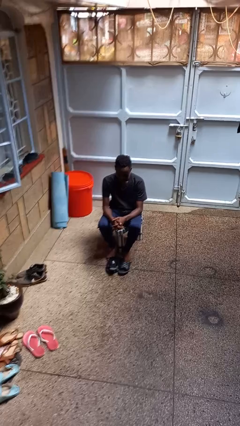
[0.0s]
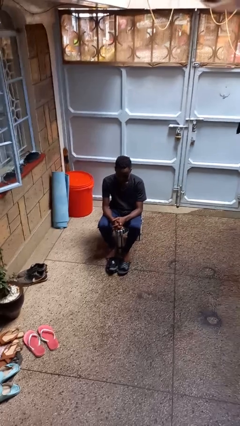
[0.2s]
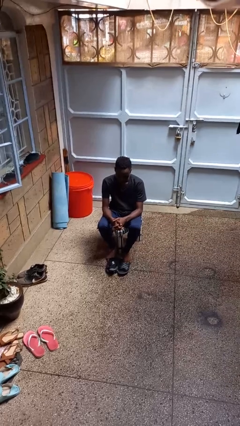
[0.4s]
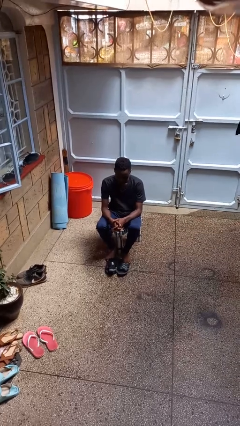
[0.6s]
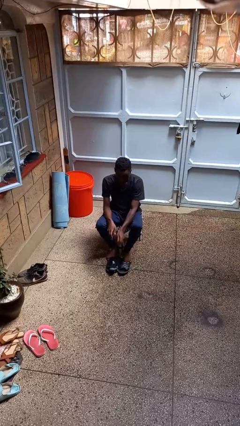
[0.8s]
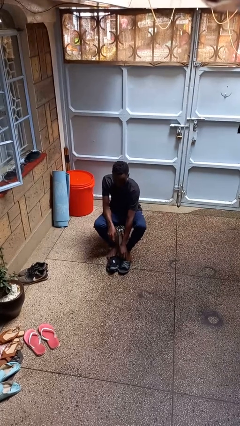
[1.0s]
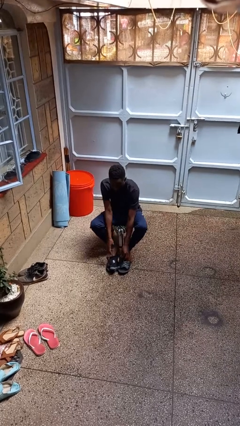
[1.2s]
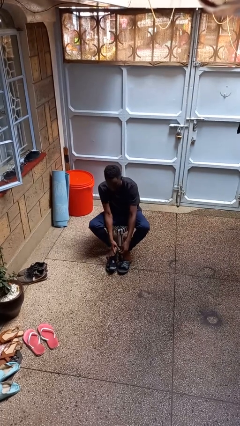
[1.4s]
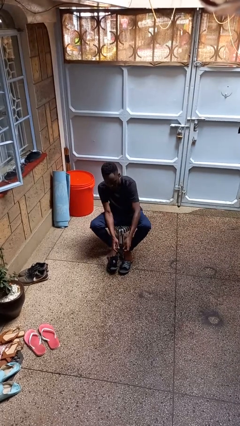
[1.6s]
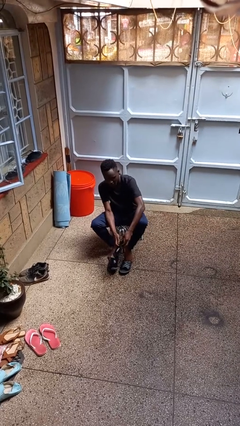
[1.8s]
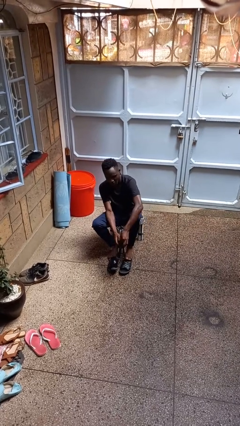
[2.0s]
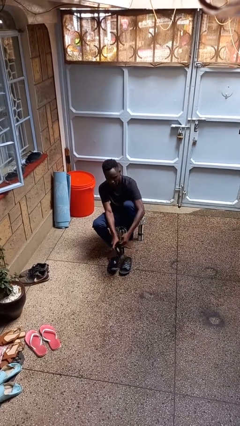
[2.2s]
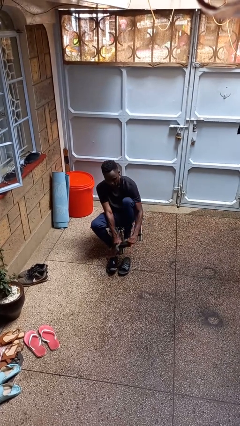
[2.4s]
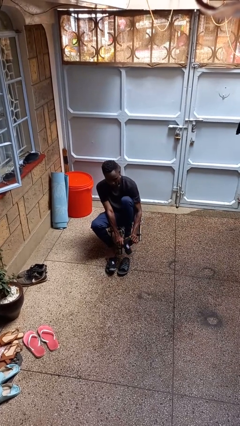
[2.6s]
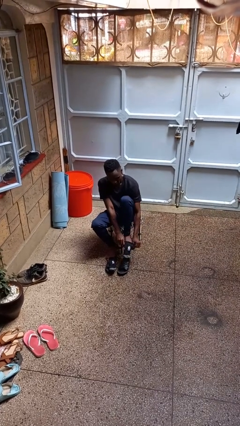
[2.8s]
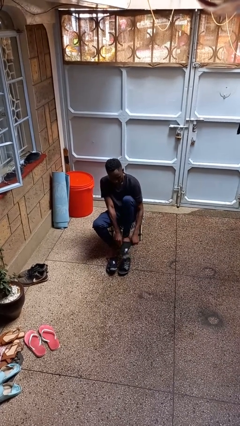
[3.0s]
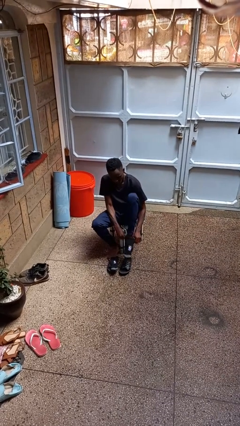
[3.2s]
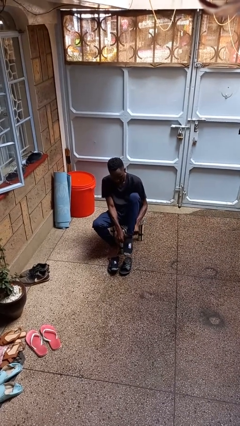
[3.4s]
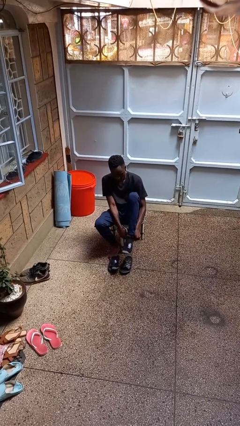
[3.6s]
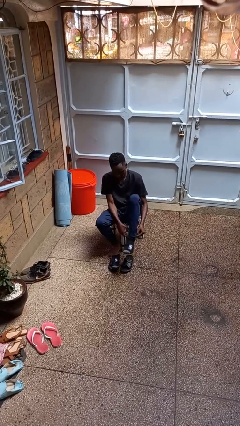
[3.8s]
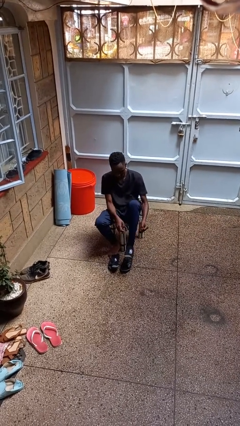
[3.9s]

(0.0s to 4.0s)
person puts on socks

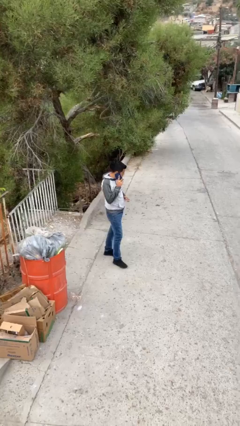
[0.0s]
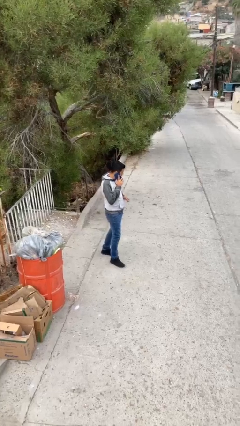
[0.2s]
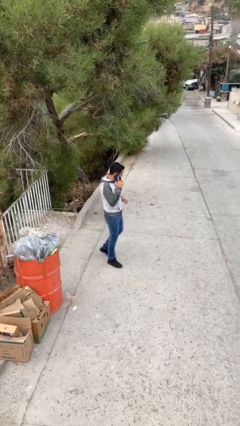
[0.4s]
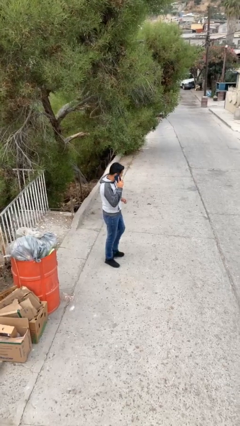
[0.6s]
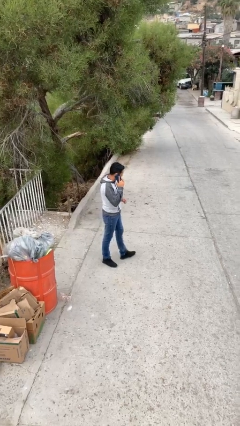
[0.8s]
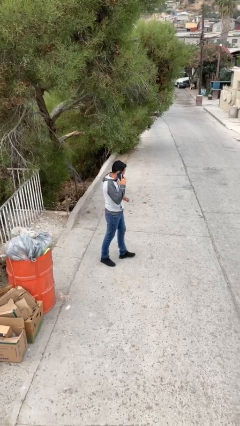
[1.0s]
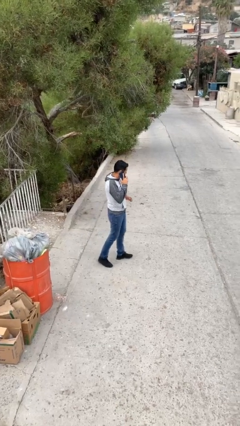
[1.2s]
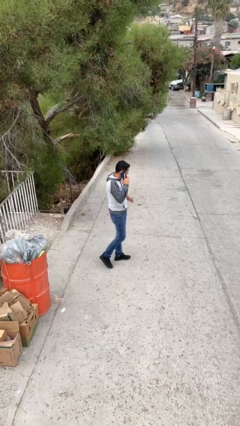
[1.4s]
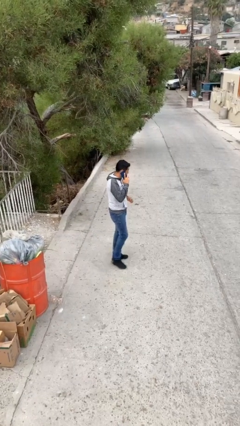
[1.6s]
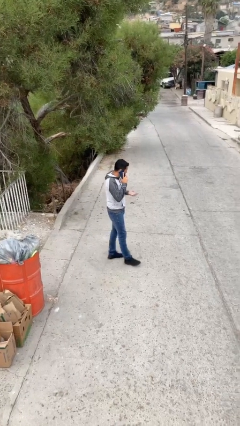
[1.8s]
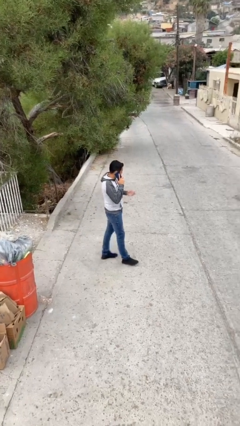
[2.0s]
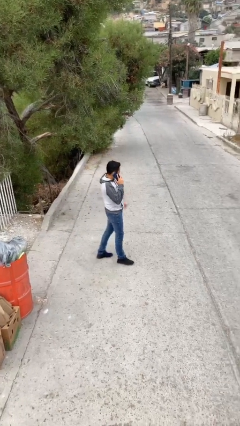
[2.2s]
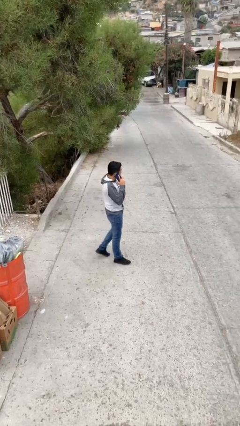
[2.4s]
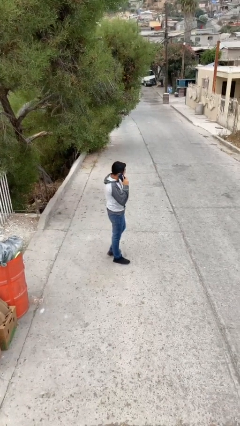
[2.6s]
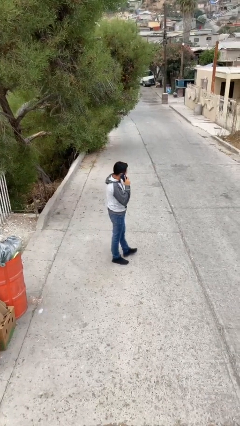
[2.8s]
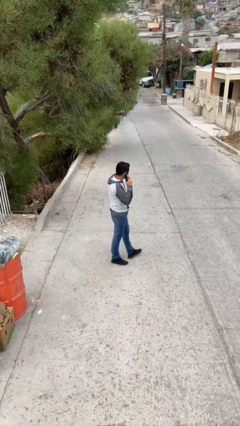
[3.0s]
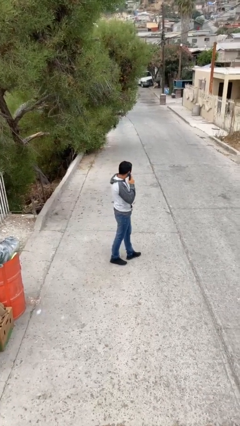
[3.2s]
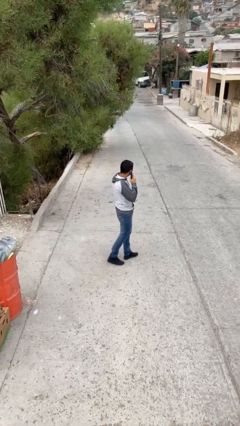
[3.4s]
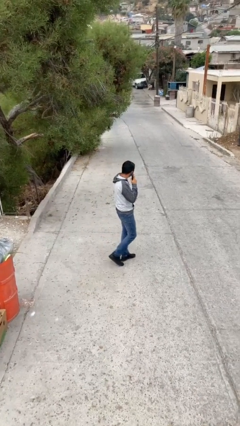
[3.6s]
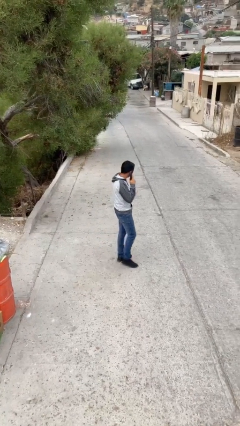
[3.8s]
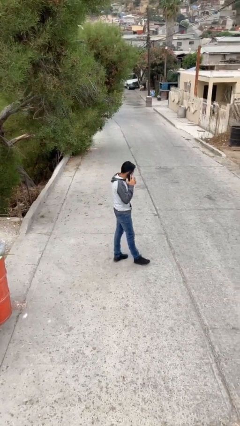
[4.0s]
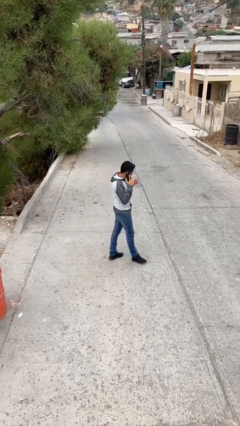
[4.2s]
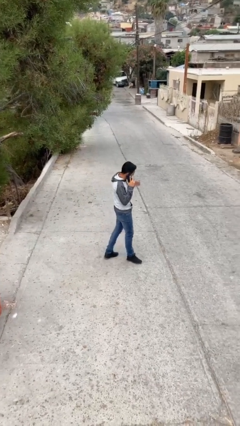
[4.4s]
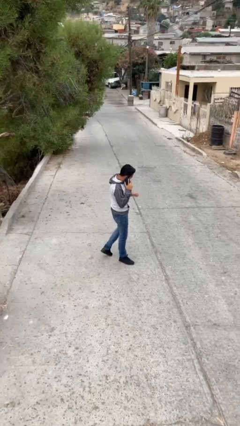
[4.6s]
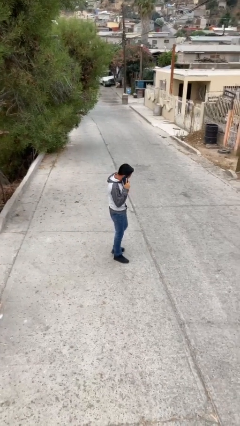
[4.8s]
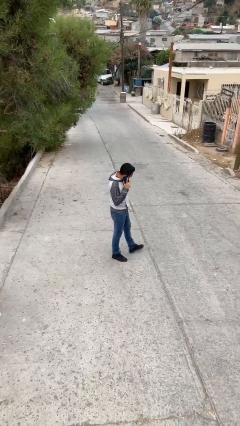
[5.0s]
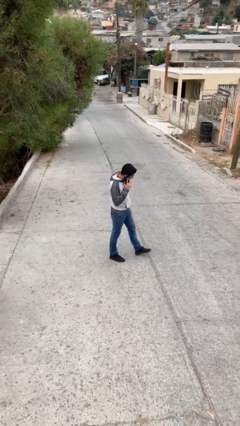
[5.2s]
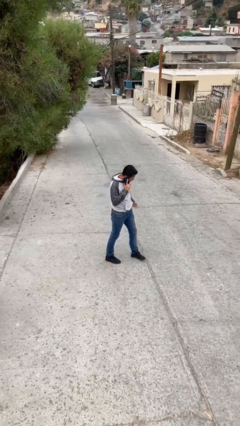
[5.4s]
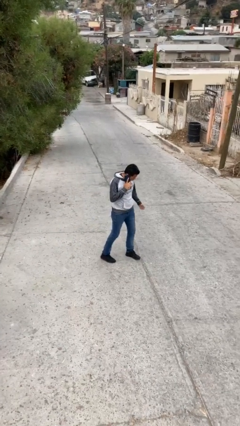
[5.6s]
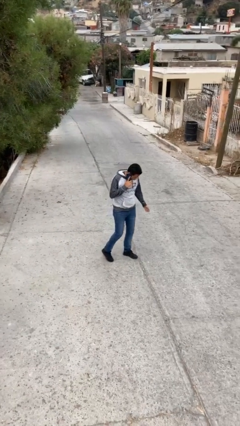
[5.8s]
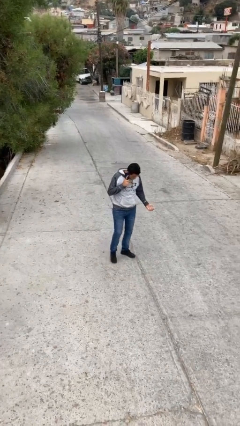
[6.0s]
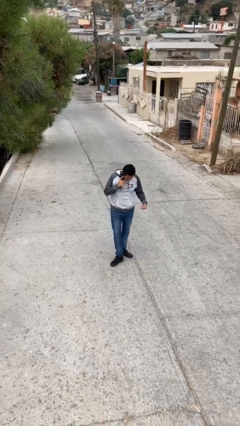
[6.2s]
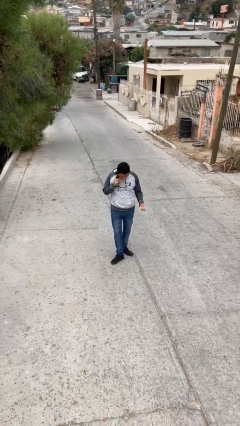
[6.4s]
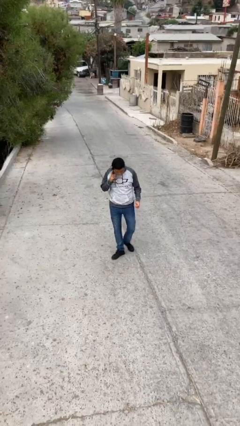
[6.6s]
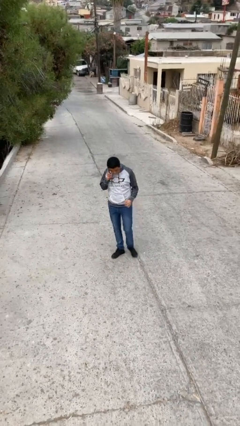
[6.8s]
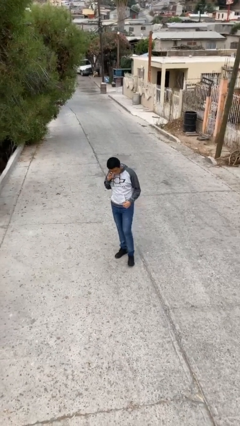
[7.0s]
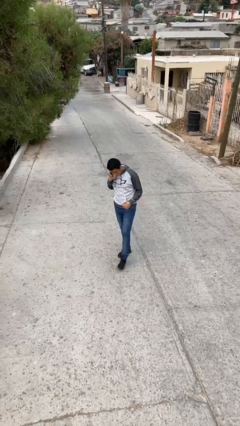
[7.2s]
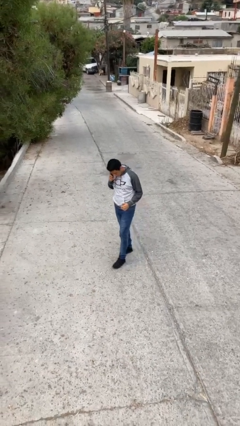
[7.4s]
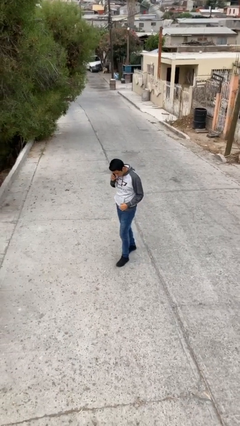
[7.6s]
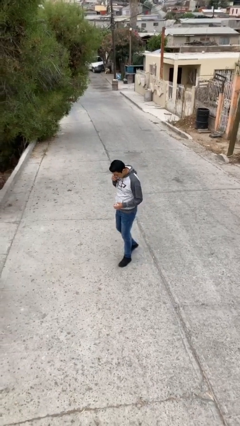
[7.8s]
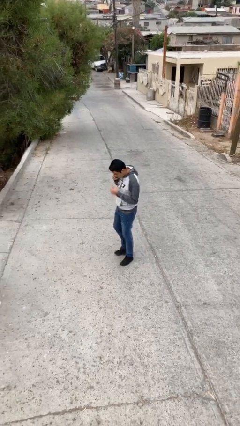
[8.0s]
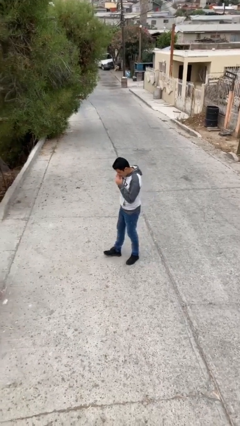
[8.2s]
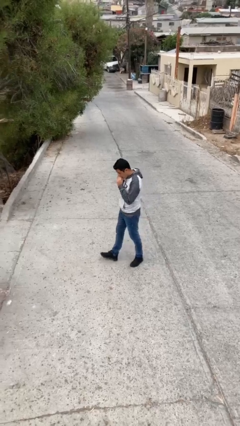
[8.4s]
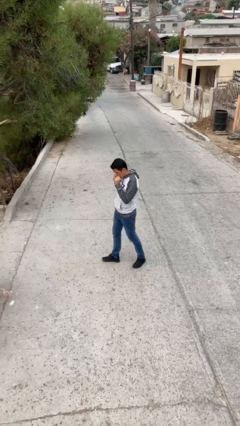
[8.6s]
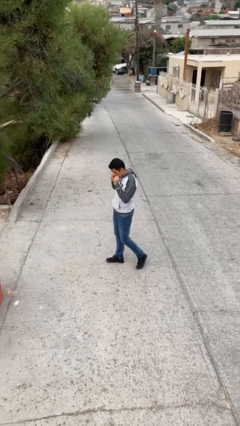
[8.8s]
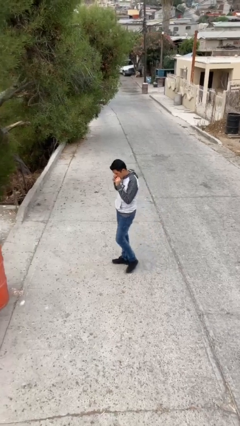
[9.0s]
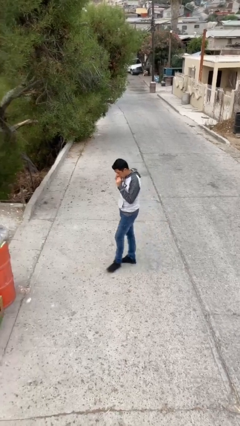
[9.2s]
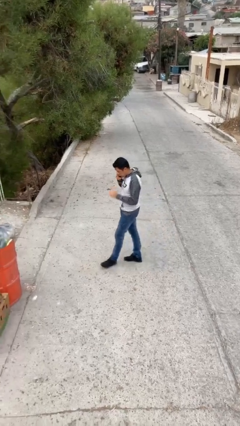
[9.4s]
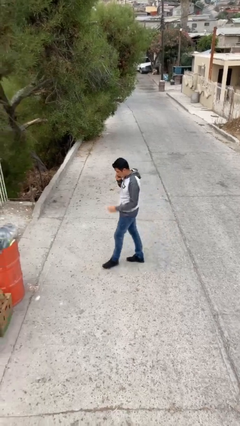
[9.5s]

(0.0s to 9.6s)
person talks on phone

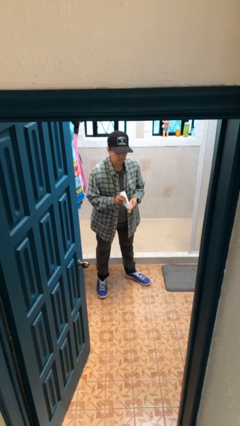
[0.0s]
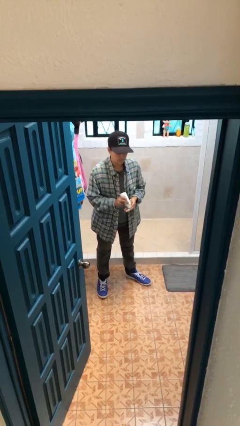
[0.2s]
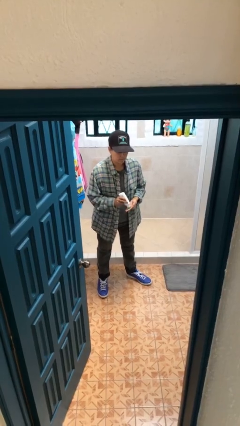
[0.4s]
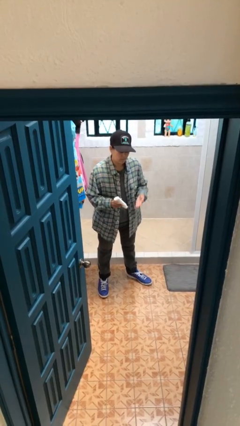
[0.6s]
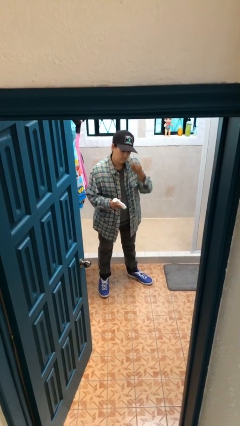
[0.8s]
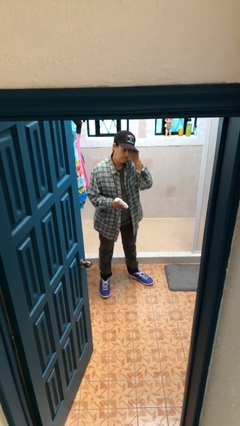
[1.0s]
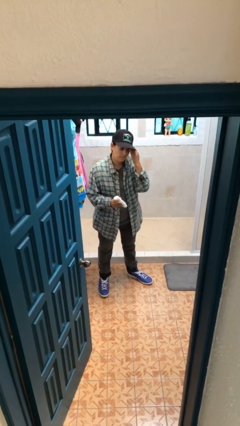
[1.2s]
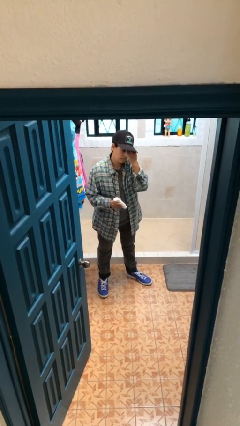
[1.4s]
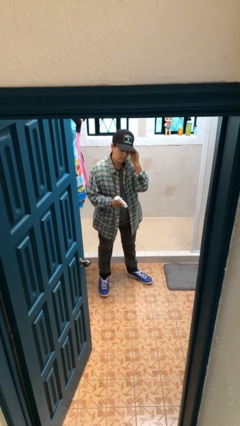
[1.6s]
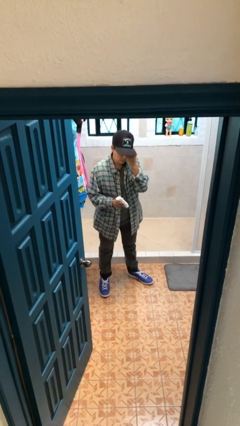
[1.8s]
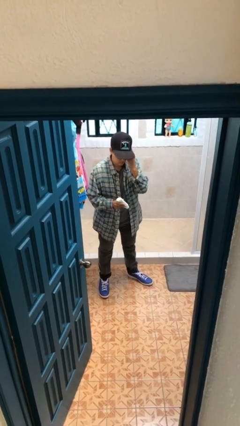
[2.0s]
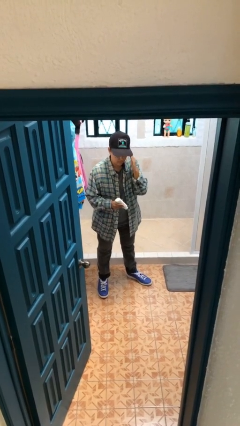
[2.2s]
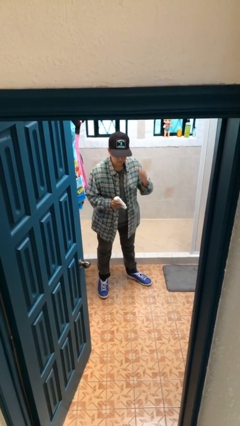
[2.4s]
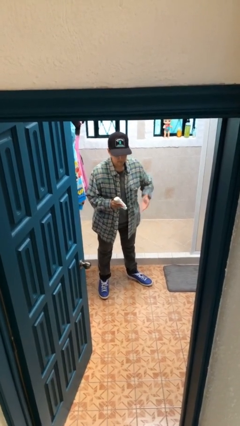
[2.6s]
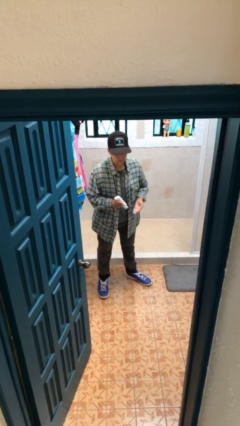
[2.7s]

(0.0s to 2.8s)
person applies facial moisturizer

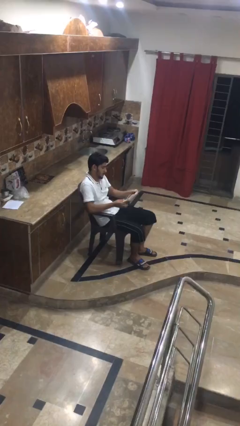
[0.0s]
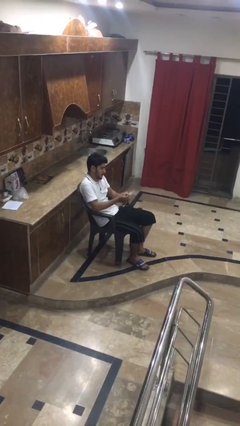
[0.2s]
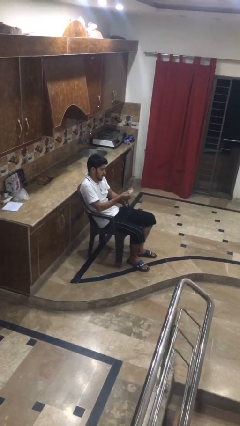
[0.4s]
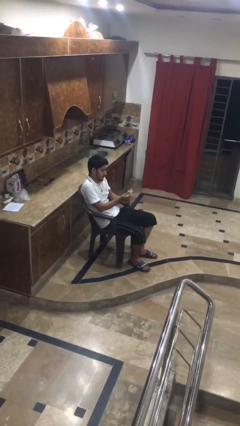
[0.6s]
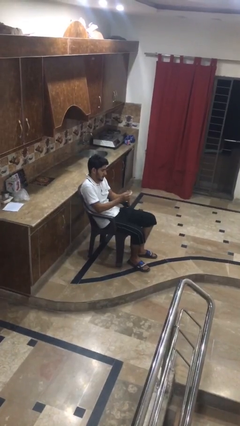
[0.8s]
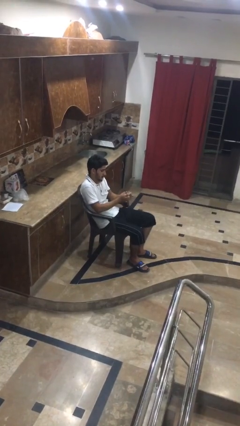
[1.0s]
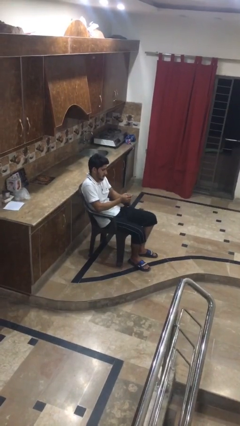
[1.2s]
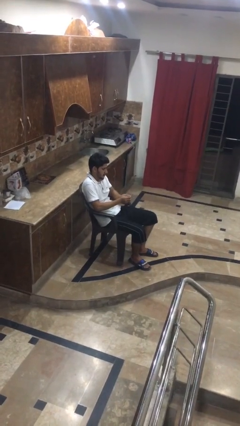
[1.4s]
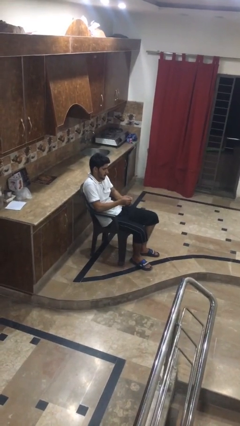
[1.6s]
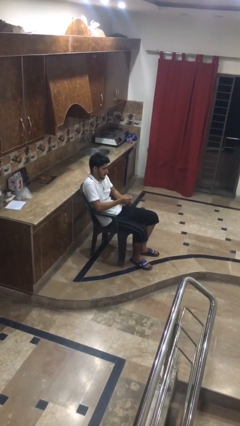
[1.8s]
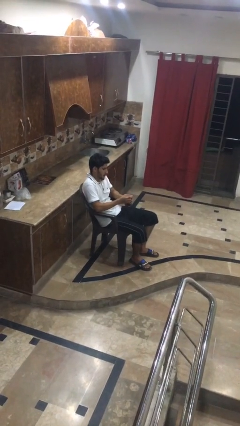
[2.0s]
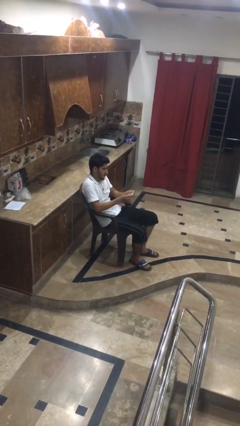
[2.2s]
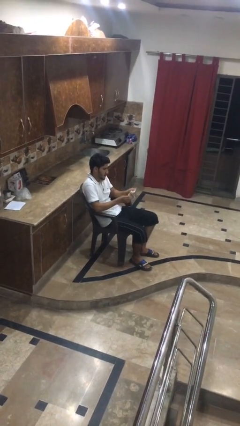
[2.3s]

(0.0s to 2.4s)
person crumples paper
